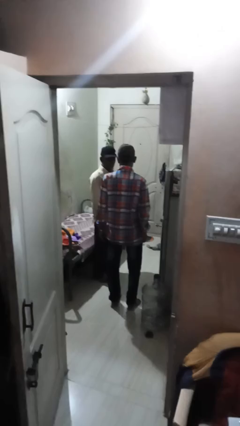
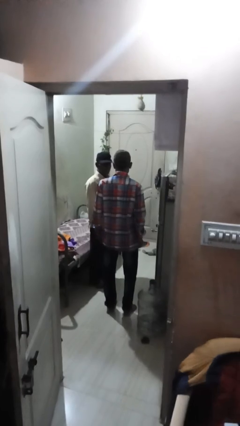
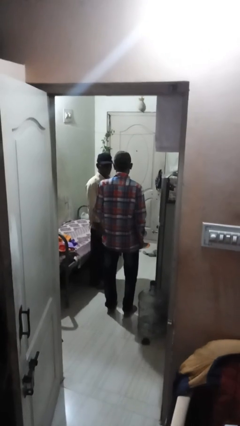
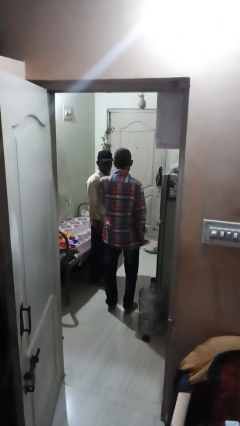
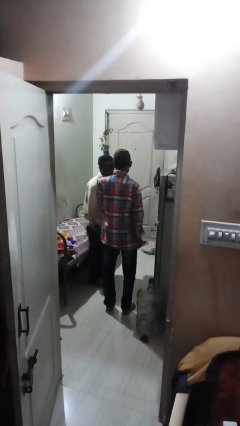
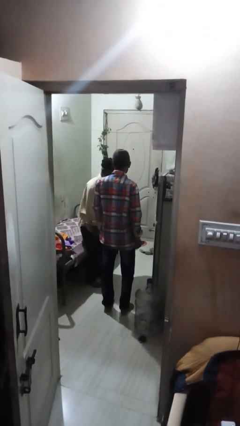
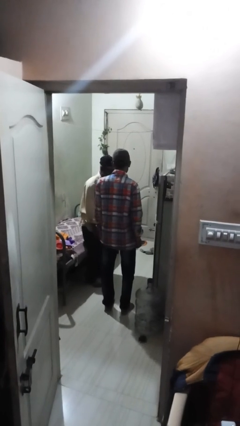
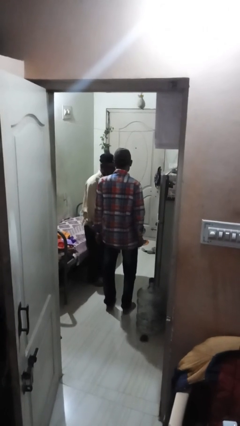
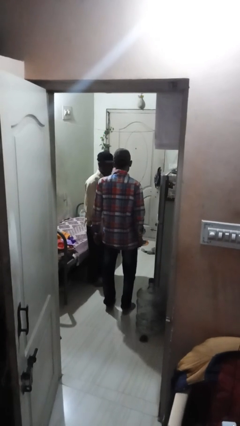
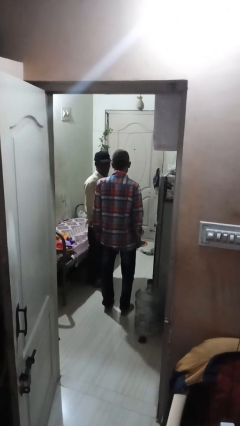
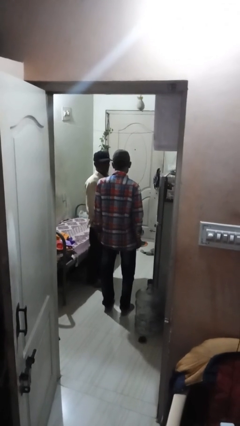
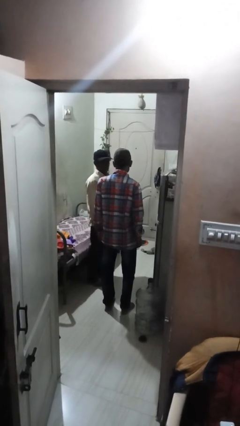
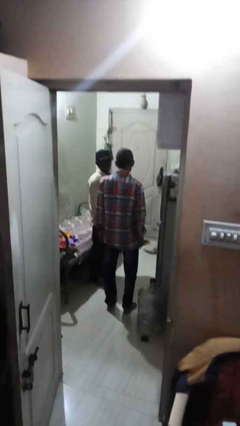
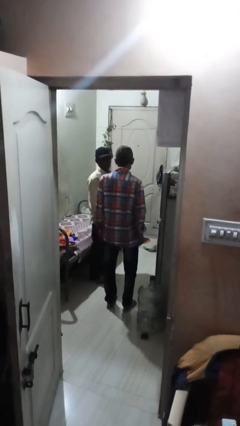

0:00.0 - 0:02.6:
person tickles person

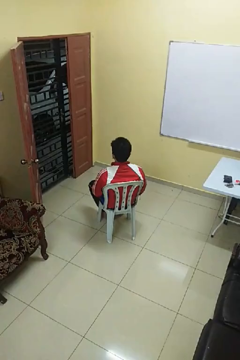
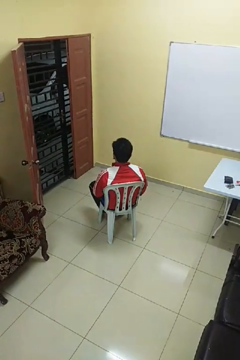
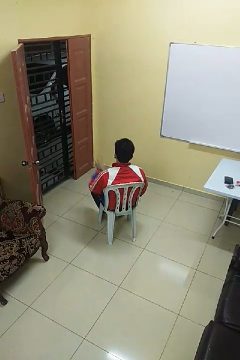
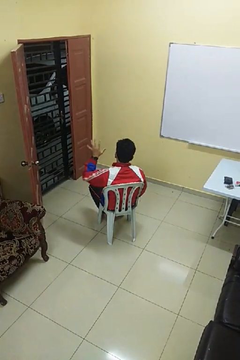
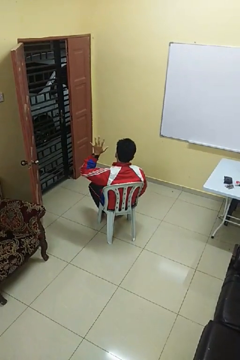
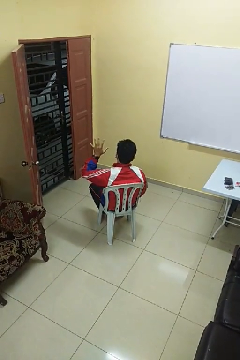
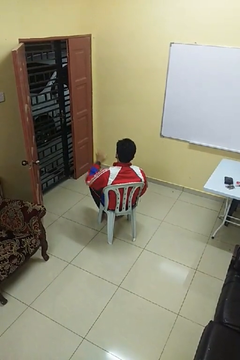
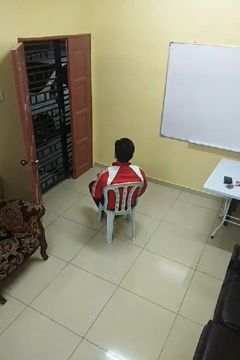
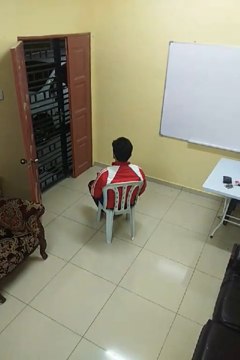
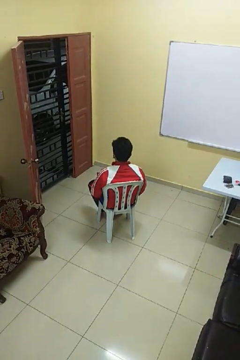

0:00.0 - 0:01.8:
person gestures number five

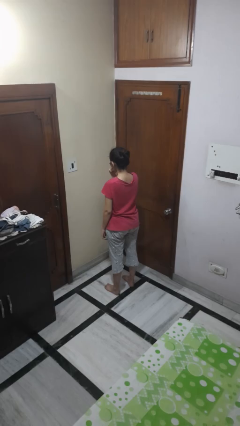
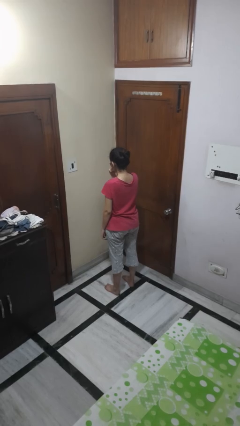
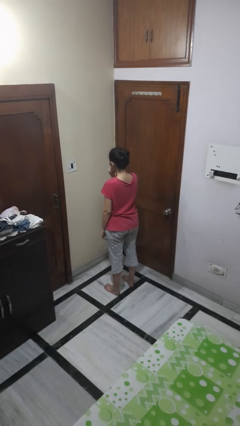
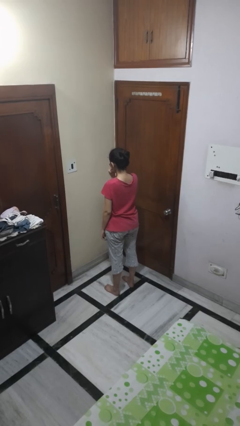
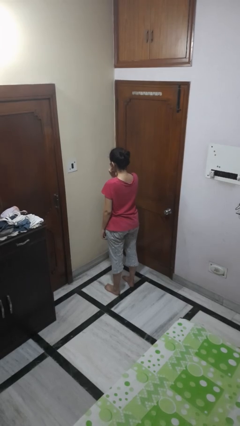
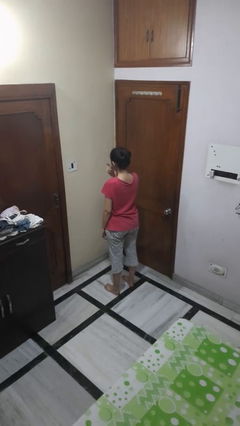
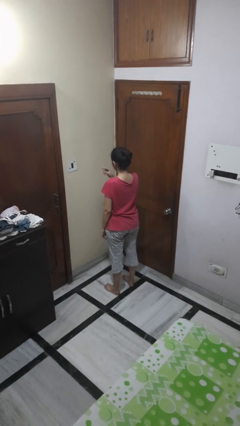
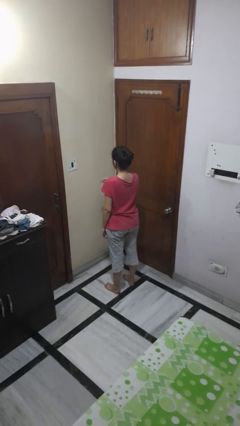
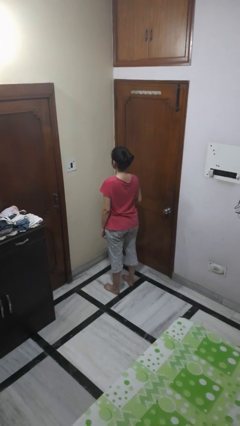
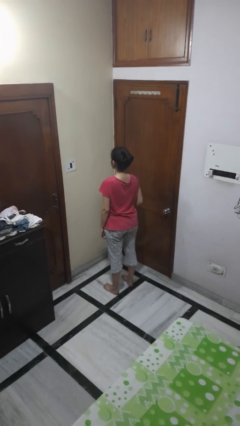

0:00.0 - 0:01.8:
person gestures watch closely

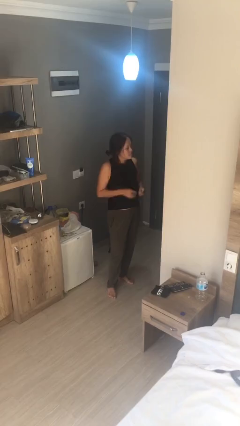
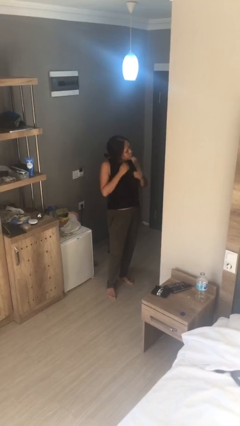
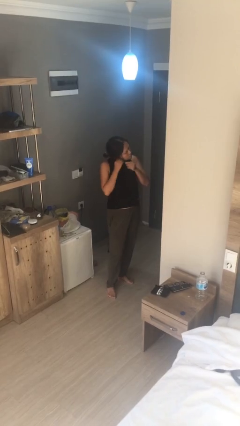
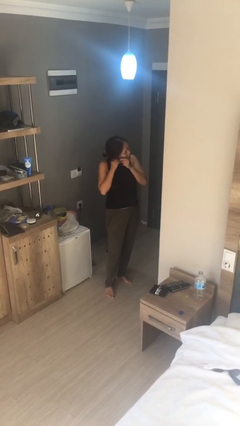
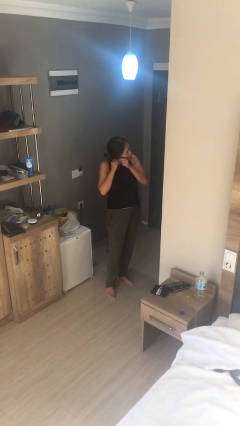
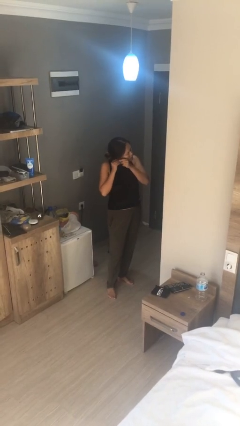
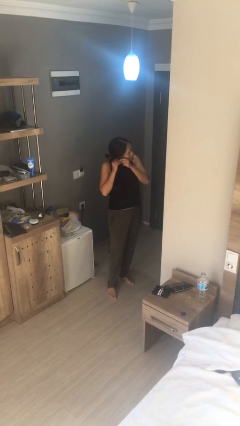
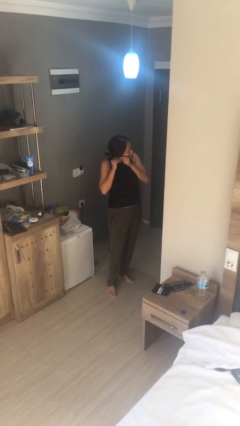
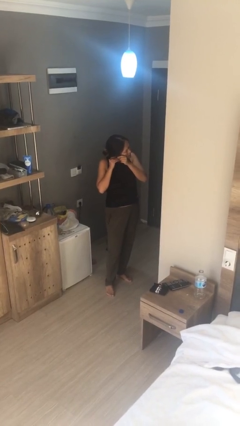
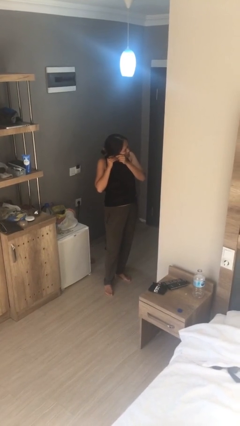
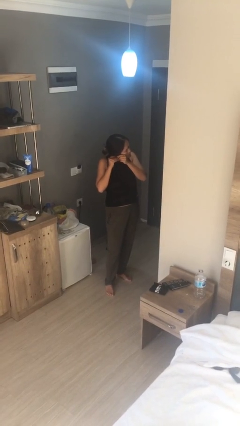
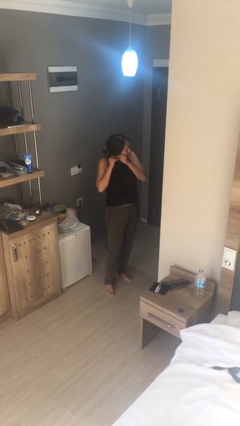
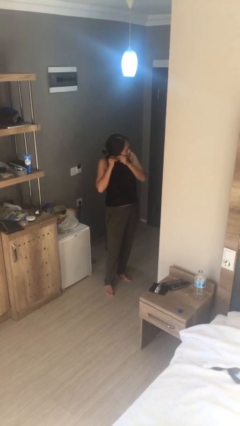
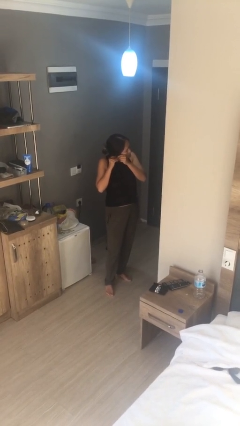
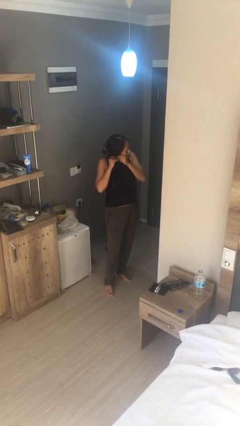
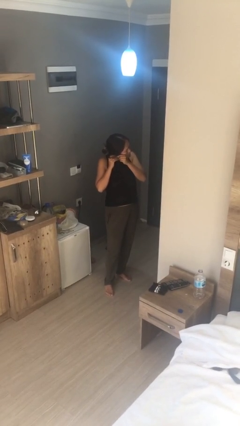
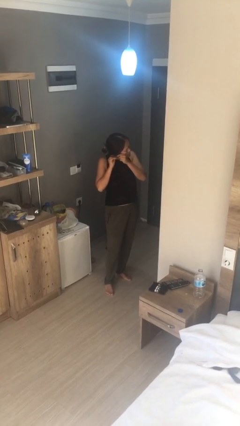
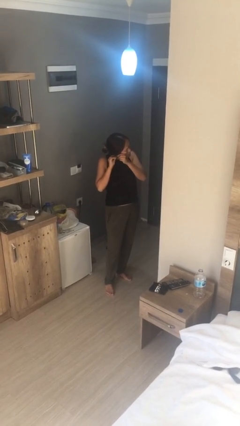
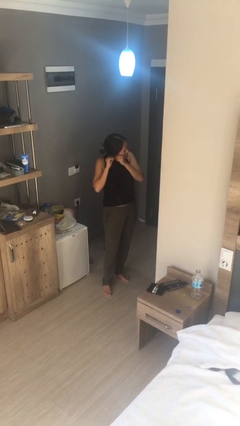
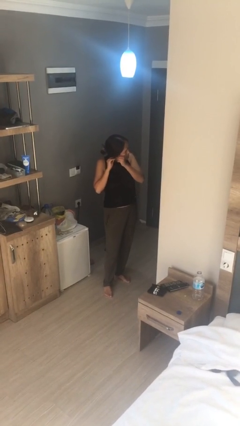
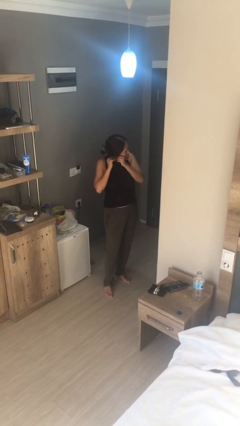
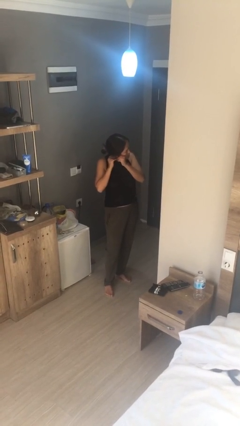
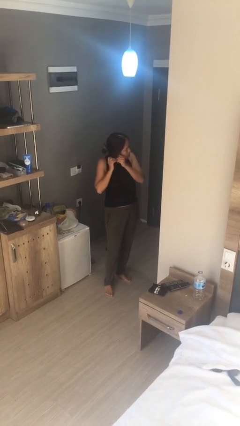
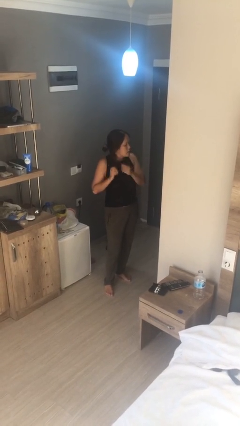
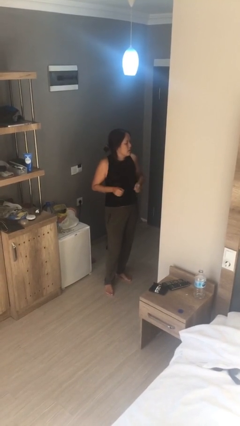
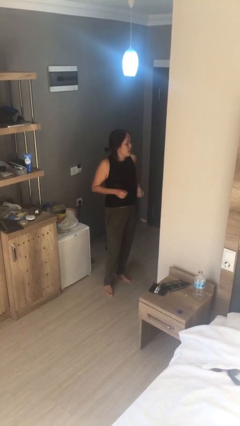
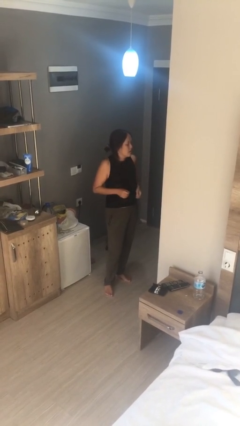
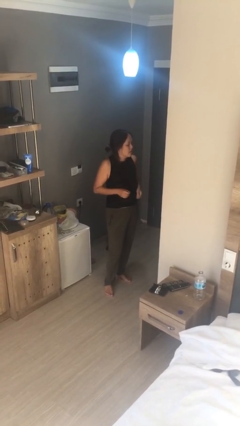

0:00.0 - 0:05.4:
person puts on earrings

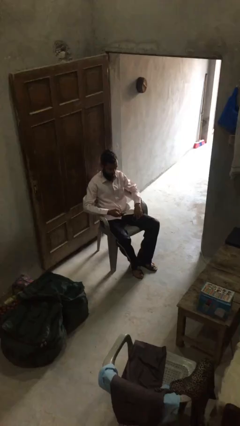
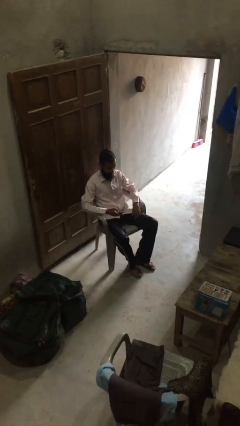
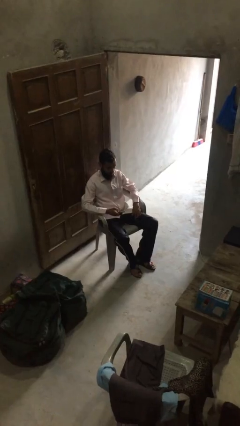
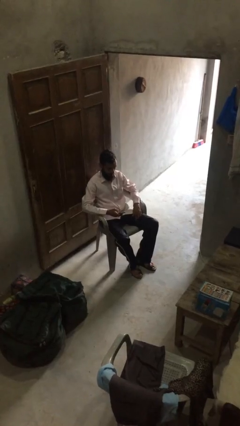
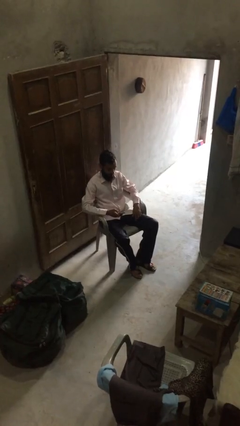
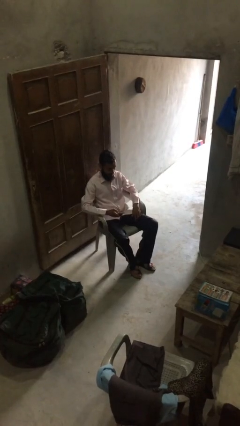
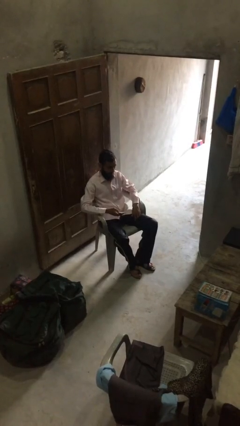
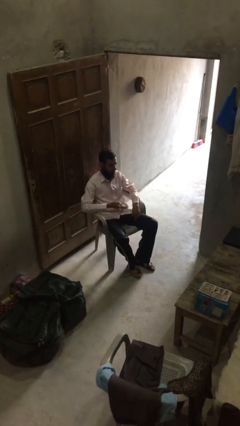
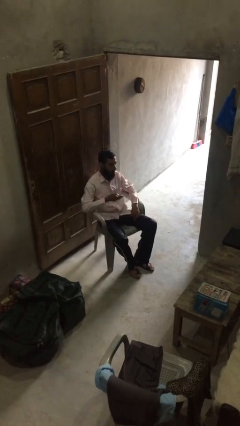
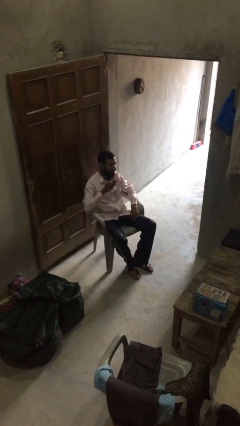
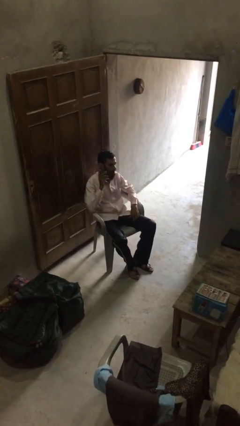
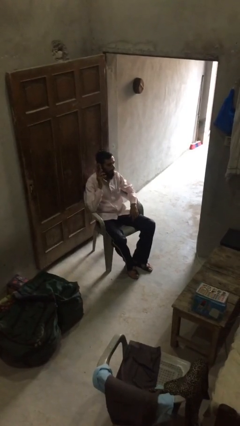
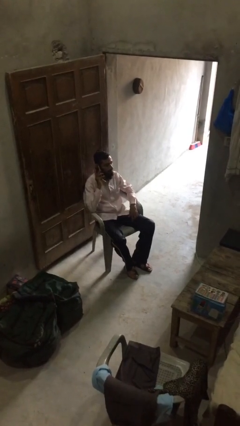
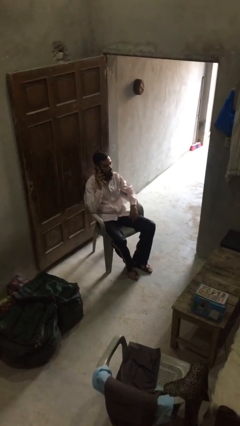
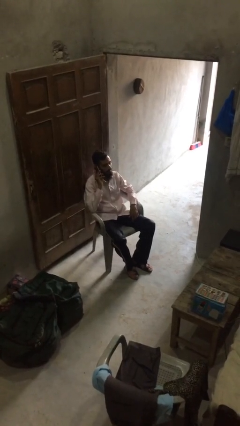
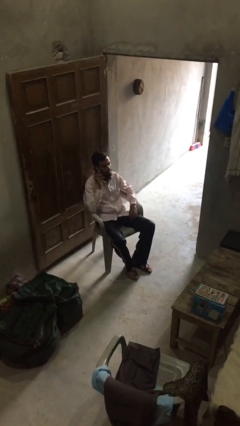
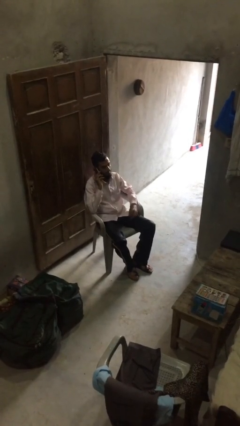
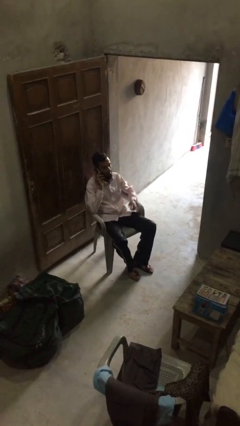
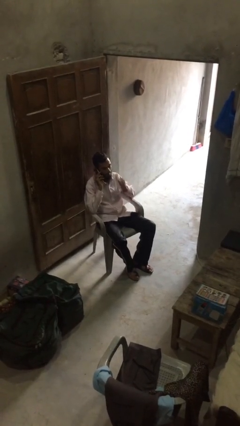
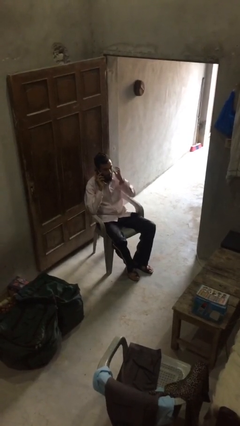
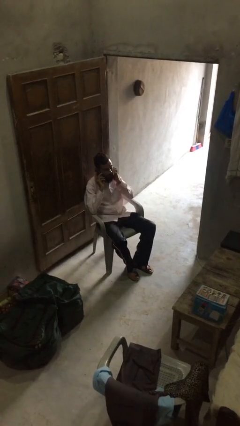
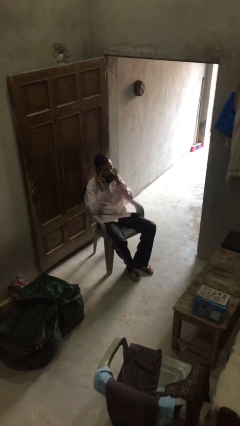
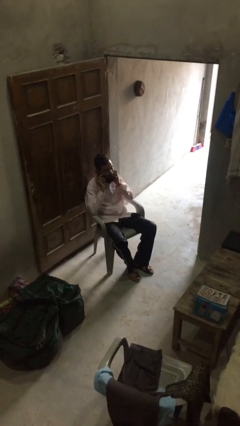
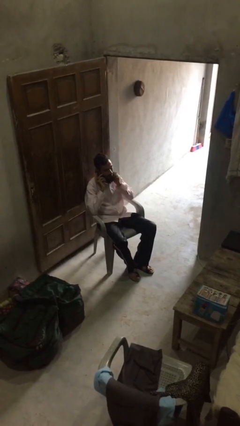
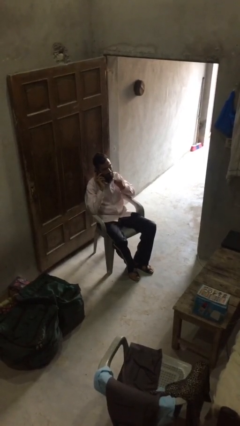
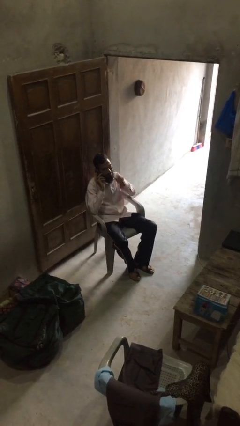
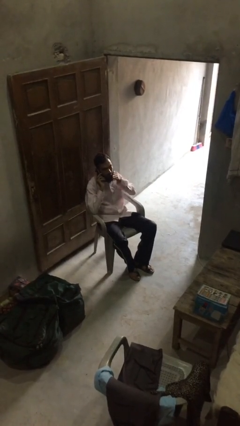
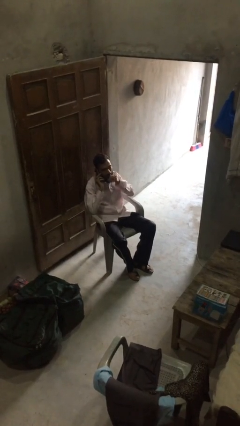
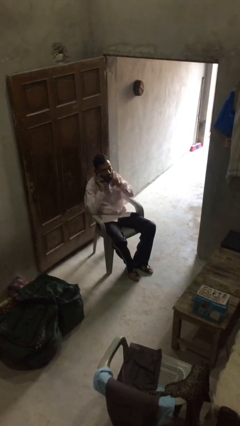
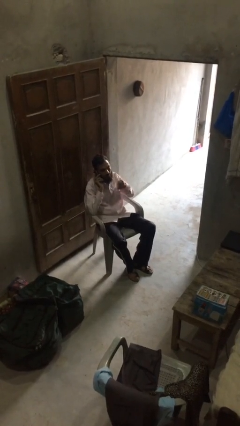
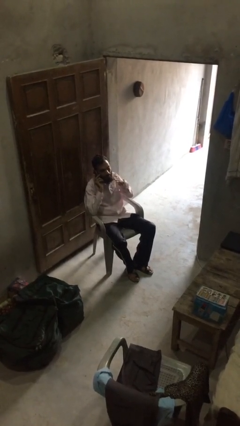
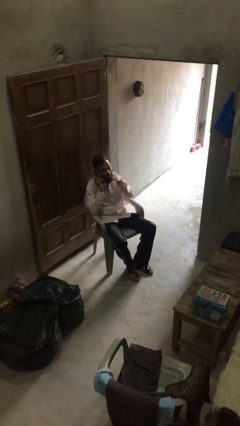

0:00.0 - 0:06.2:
person talks on phone
